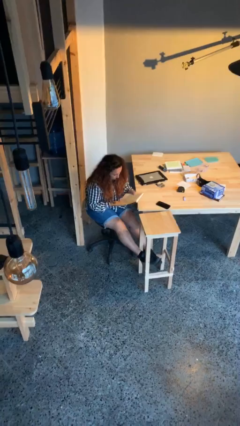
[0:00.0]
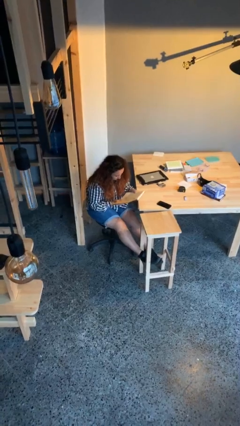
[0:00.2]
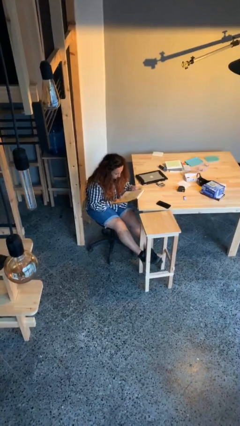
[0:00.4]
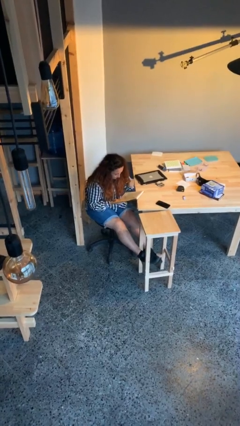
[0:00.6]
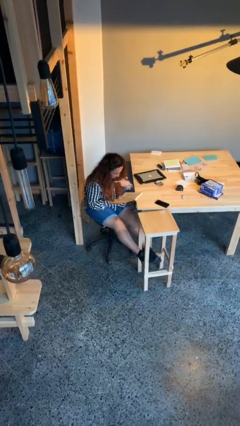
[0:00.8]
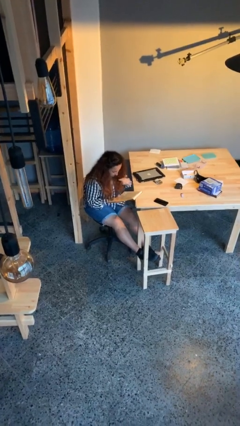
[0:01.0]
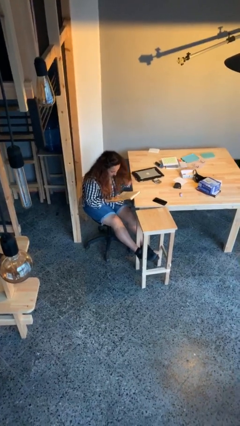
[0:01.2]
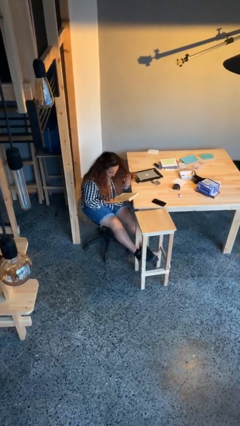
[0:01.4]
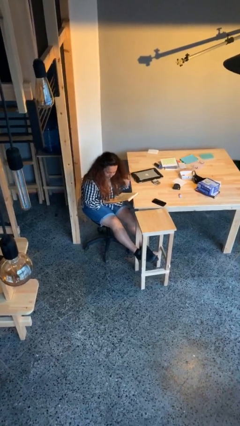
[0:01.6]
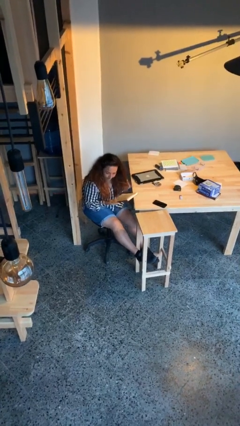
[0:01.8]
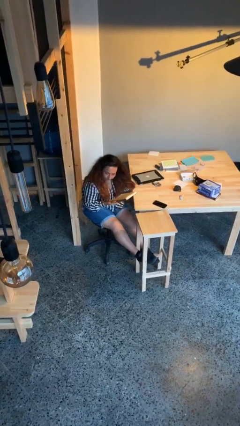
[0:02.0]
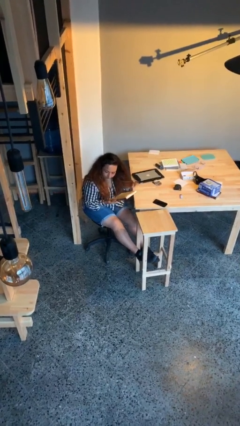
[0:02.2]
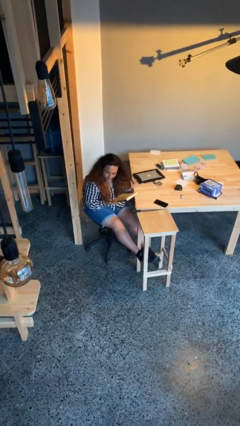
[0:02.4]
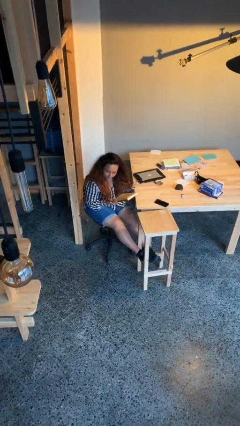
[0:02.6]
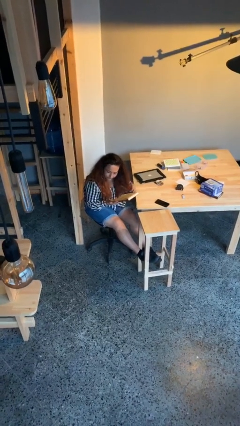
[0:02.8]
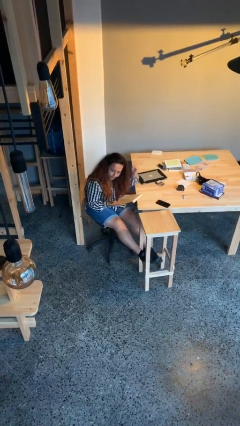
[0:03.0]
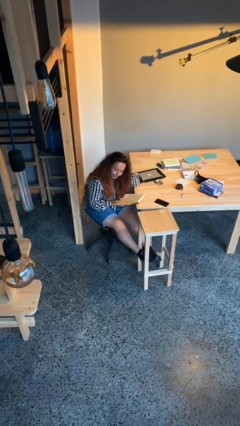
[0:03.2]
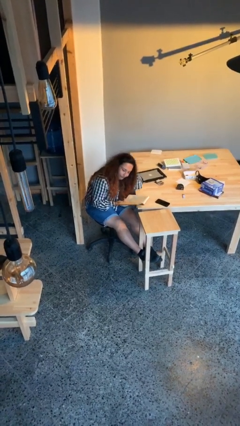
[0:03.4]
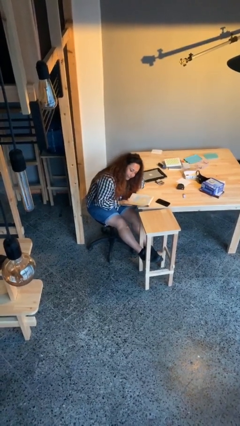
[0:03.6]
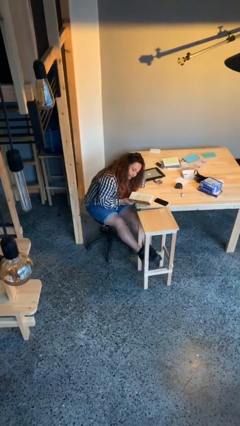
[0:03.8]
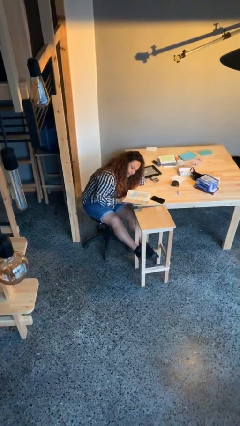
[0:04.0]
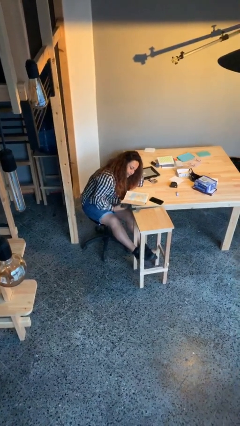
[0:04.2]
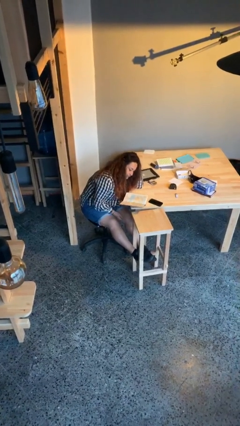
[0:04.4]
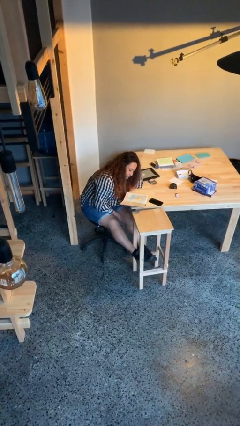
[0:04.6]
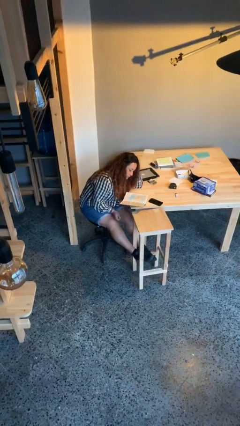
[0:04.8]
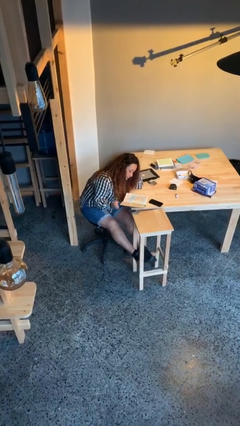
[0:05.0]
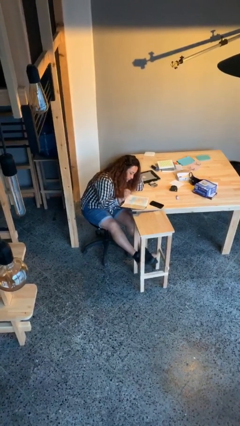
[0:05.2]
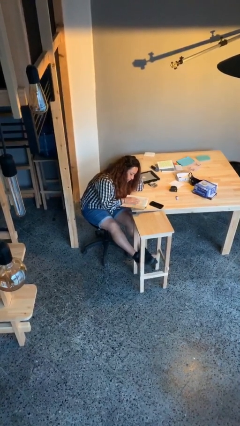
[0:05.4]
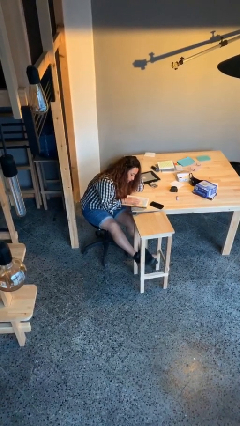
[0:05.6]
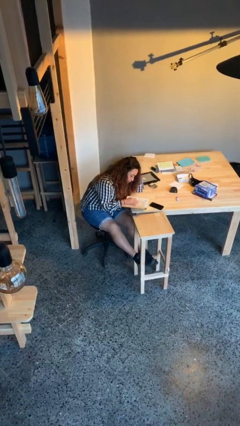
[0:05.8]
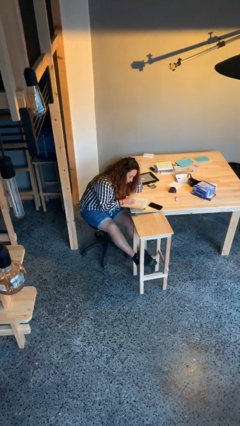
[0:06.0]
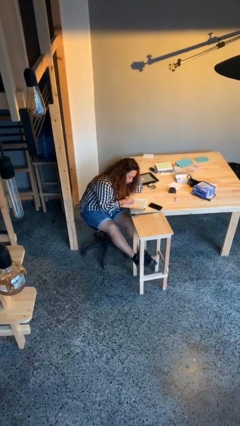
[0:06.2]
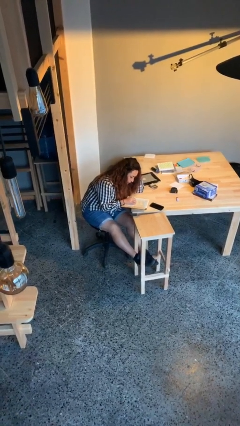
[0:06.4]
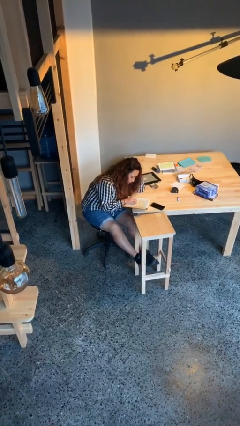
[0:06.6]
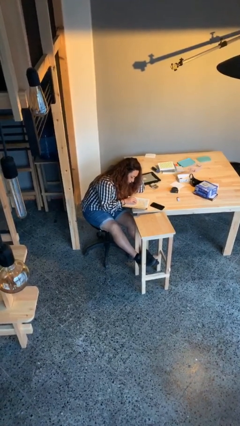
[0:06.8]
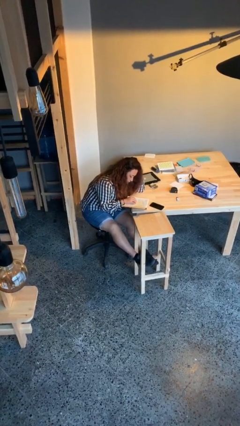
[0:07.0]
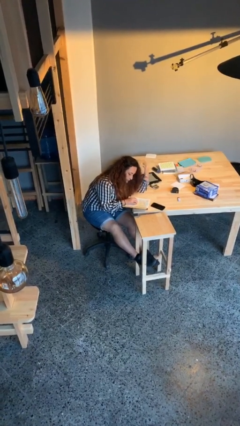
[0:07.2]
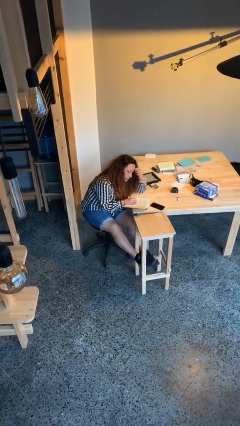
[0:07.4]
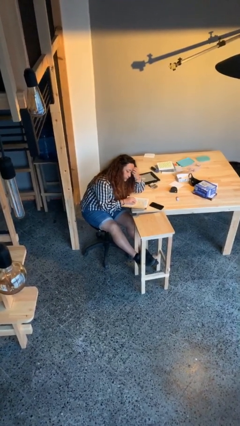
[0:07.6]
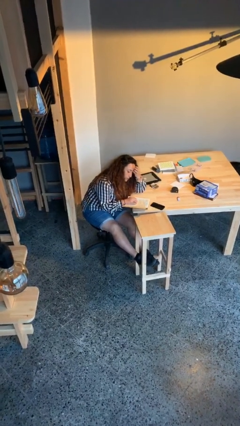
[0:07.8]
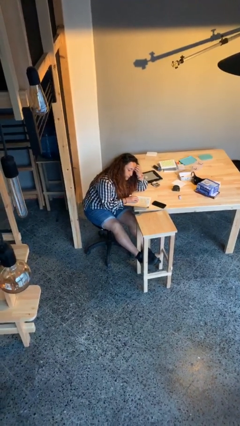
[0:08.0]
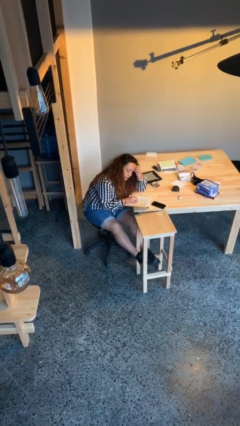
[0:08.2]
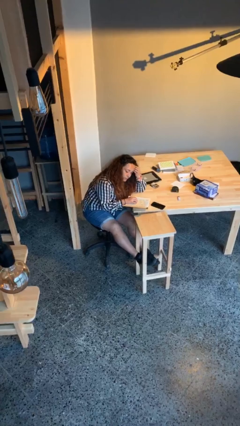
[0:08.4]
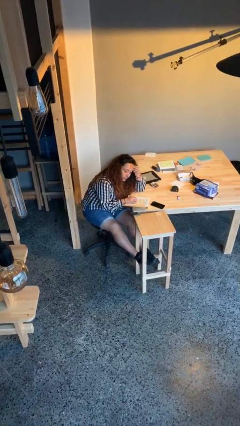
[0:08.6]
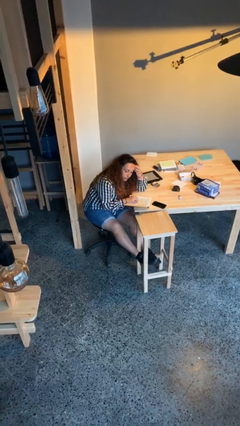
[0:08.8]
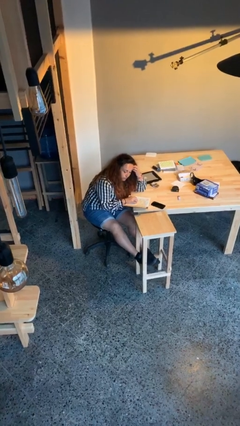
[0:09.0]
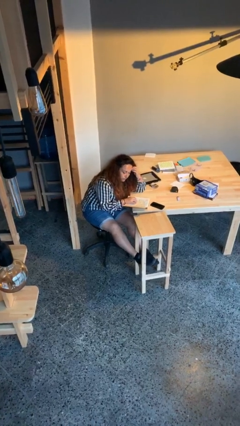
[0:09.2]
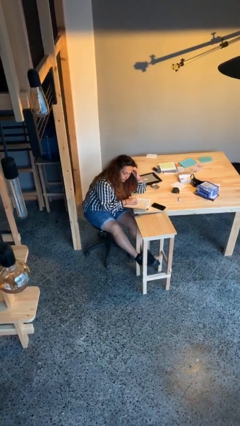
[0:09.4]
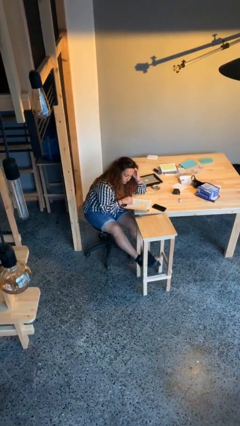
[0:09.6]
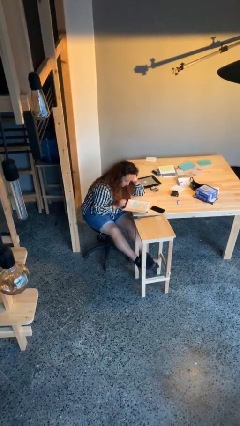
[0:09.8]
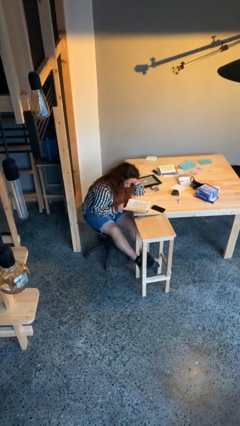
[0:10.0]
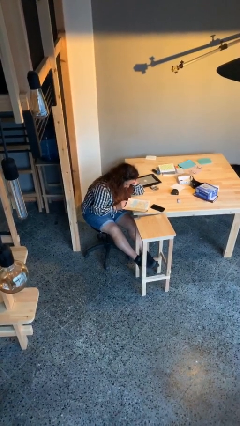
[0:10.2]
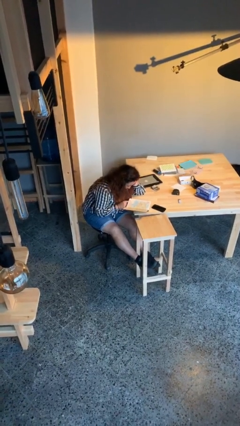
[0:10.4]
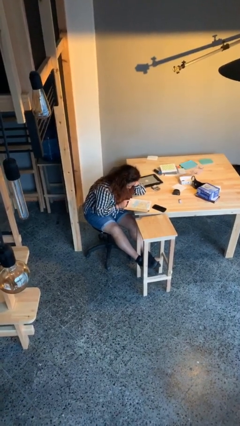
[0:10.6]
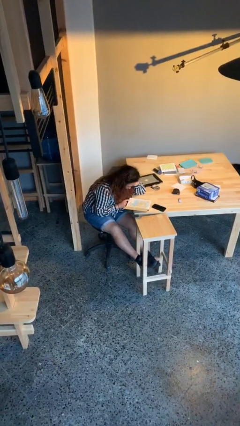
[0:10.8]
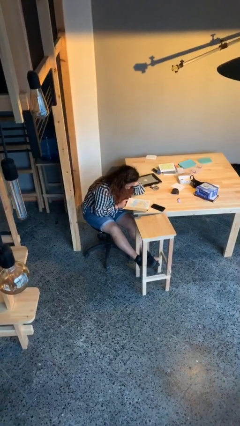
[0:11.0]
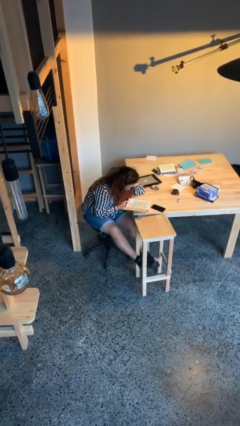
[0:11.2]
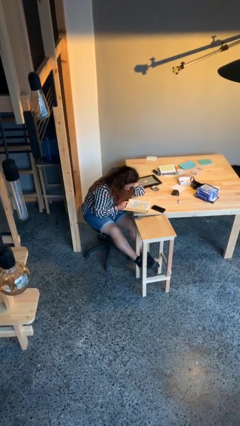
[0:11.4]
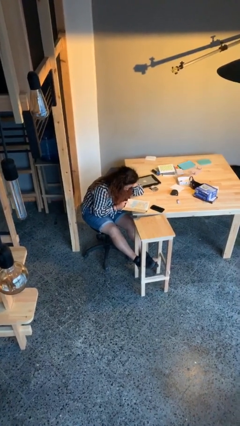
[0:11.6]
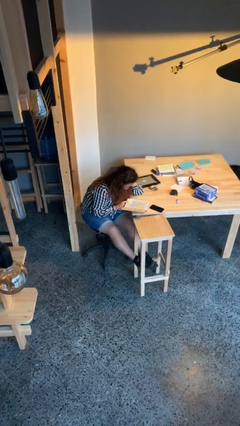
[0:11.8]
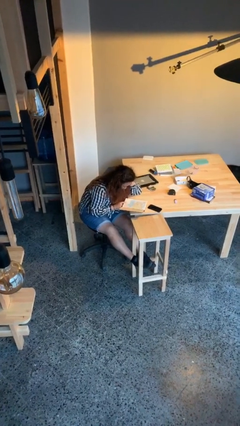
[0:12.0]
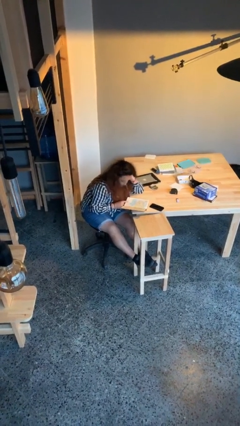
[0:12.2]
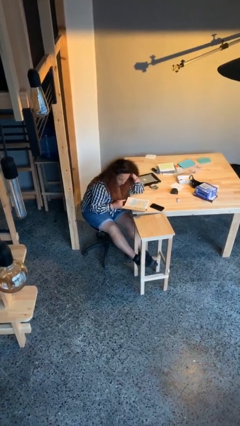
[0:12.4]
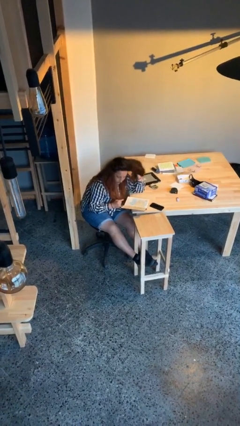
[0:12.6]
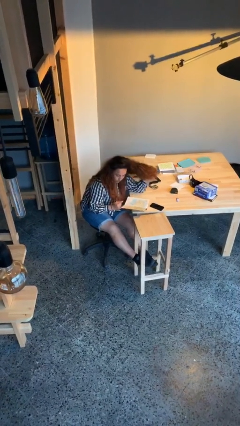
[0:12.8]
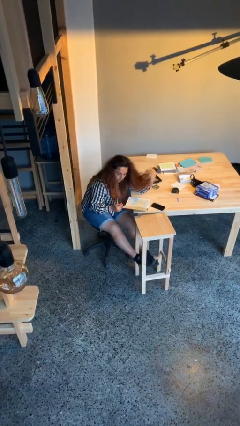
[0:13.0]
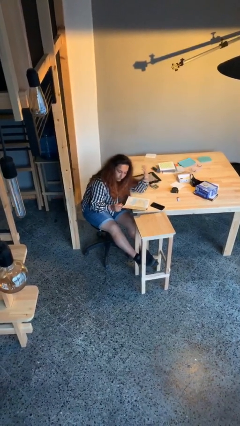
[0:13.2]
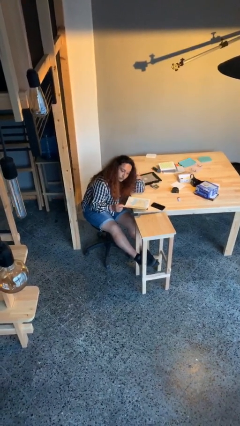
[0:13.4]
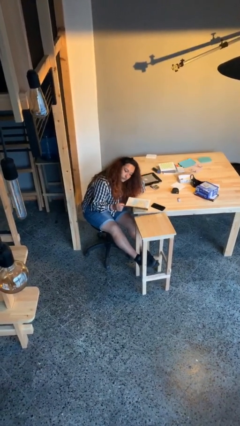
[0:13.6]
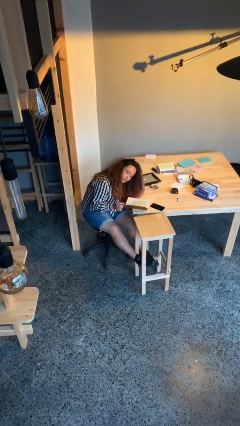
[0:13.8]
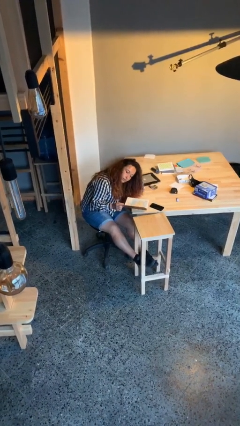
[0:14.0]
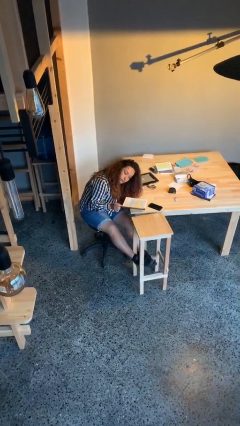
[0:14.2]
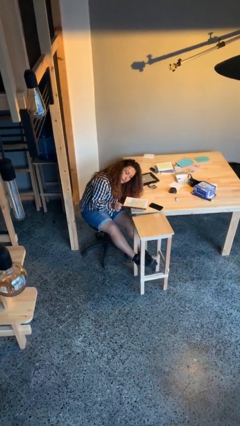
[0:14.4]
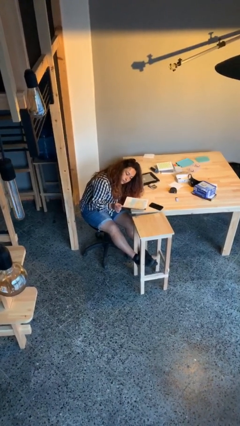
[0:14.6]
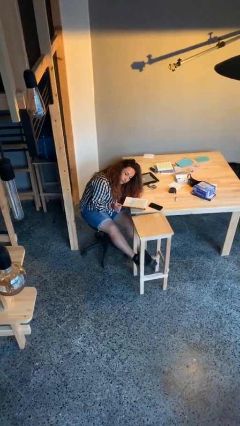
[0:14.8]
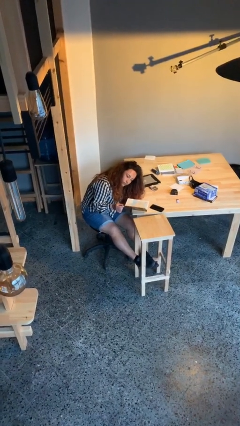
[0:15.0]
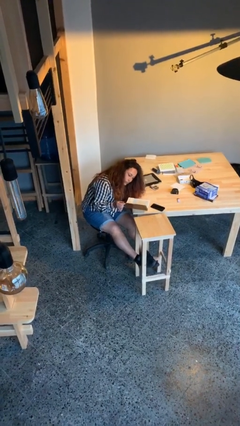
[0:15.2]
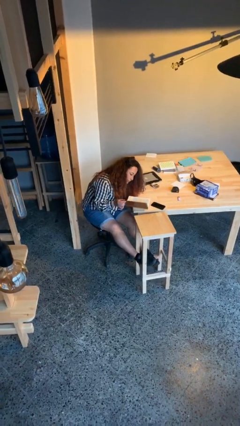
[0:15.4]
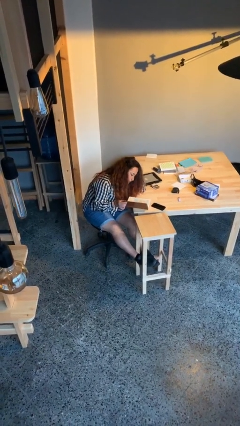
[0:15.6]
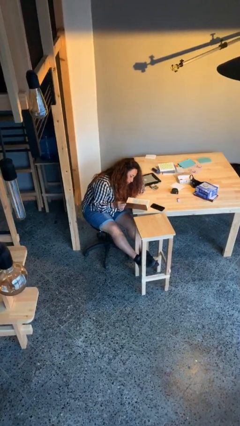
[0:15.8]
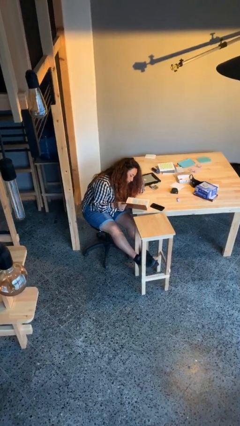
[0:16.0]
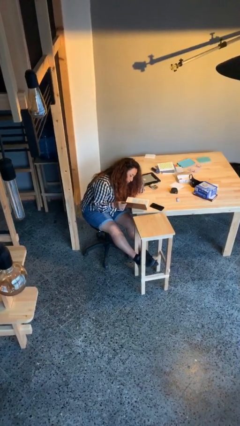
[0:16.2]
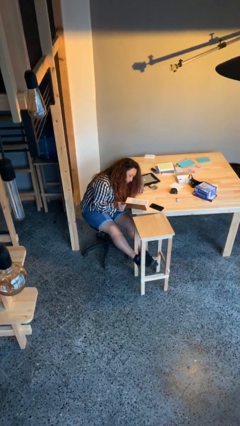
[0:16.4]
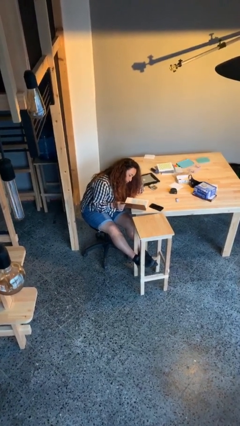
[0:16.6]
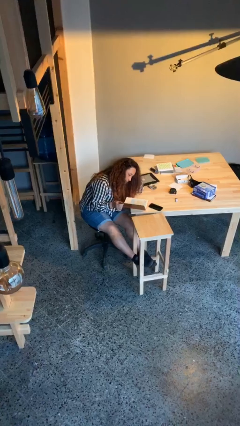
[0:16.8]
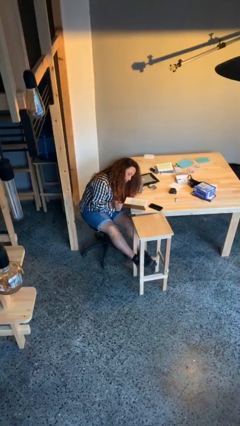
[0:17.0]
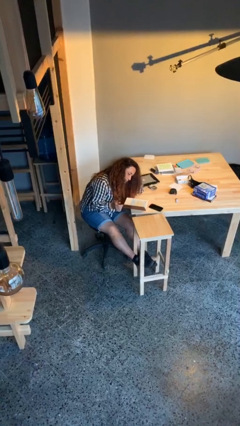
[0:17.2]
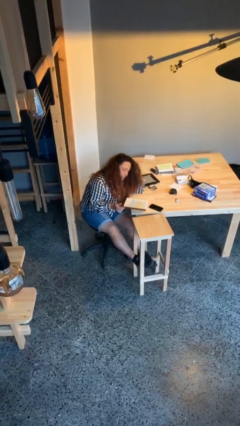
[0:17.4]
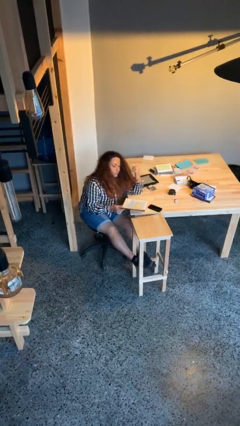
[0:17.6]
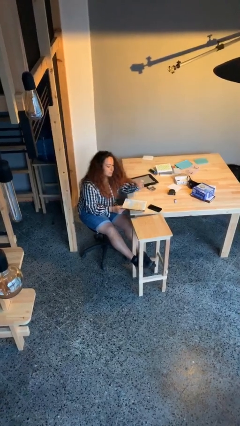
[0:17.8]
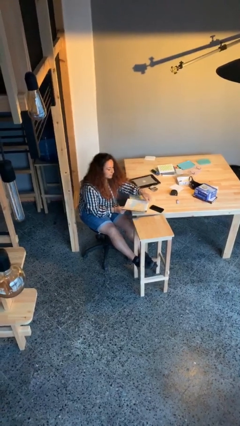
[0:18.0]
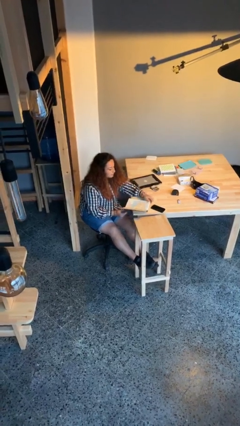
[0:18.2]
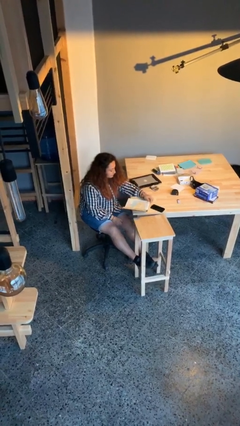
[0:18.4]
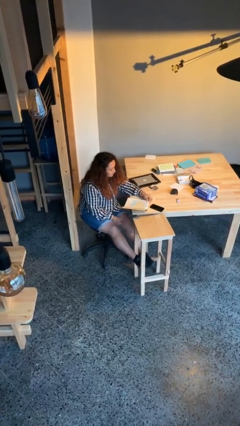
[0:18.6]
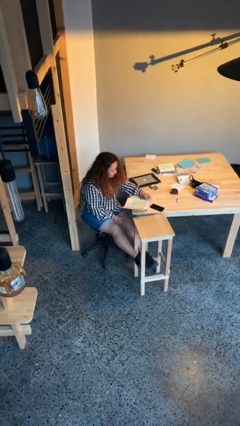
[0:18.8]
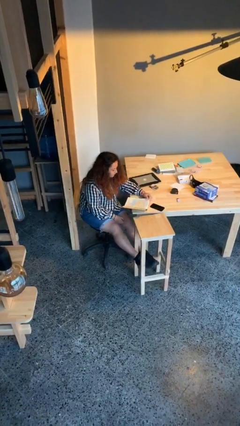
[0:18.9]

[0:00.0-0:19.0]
person reads document
